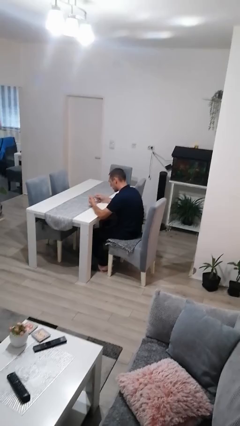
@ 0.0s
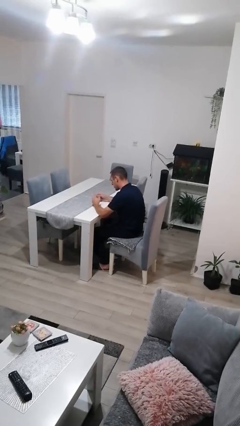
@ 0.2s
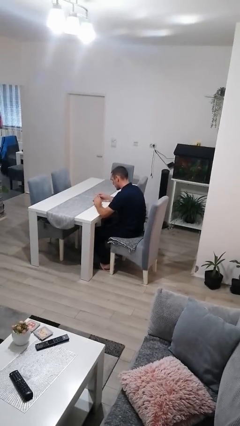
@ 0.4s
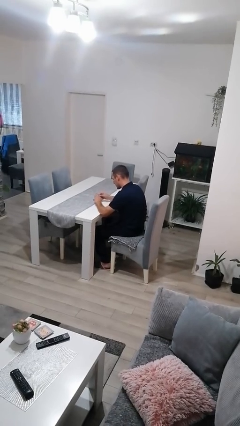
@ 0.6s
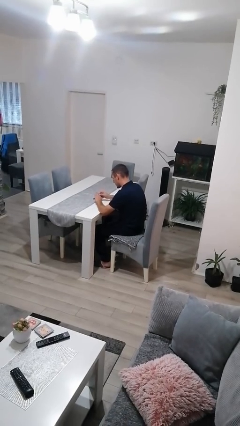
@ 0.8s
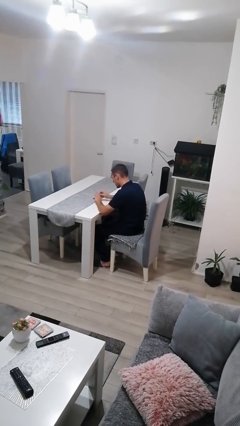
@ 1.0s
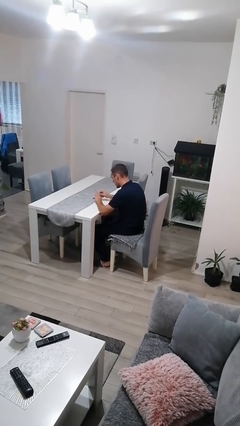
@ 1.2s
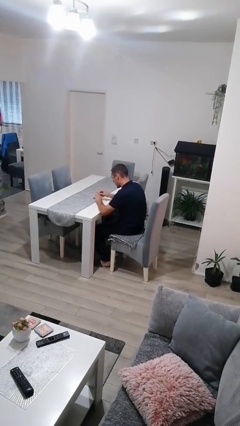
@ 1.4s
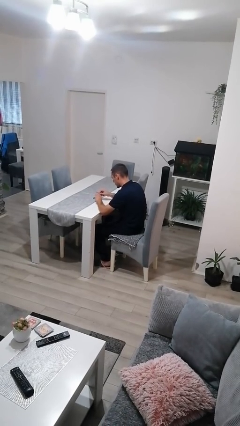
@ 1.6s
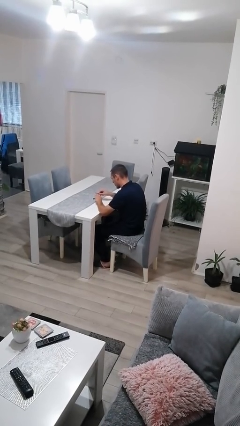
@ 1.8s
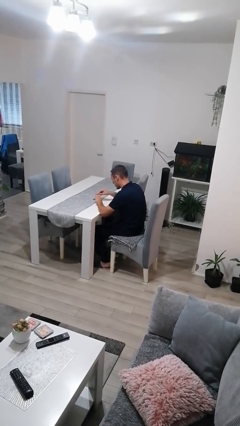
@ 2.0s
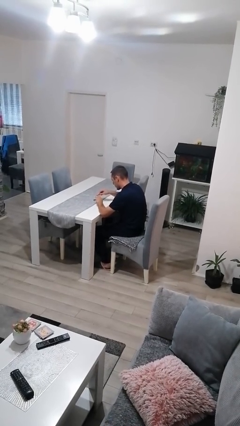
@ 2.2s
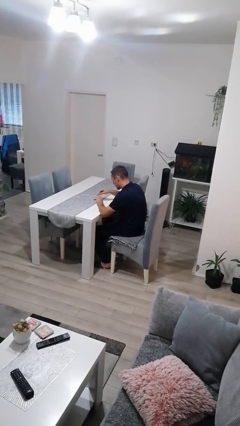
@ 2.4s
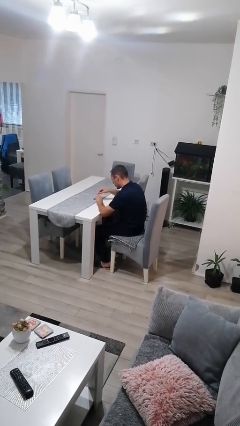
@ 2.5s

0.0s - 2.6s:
person files fingernails

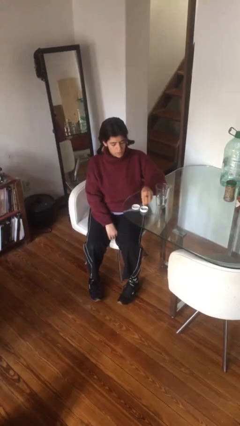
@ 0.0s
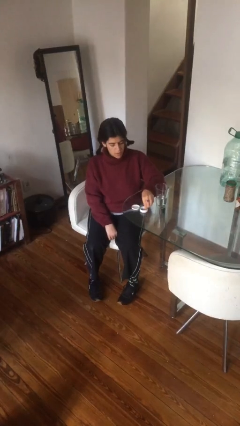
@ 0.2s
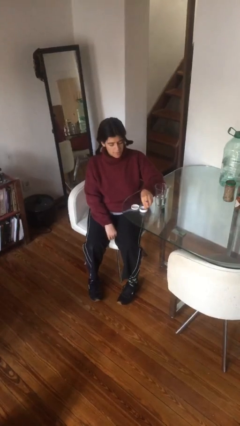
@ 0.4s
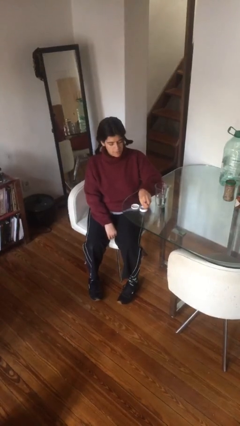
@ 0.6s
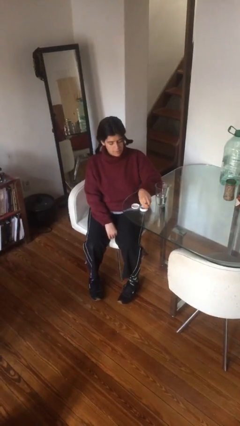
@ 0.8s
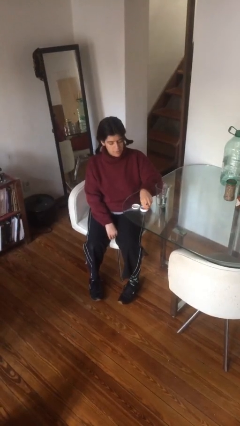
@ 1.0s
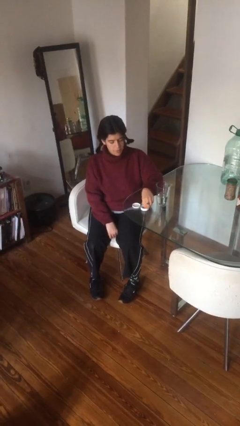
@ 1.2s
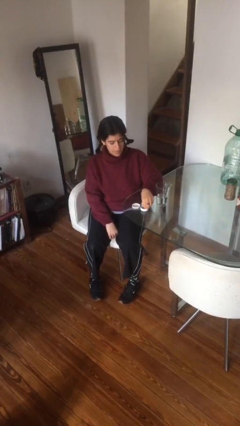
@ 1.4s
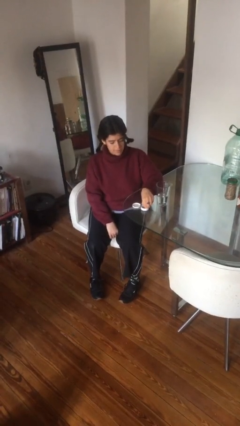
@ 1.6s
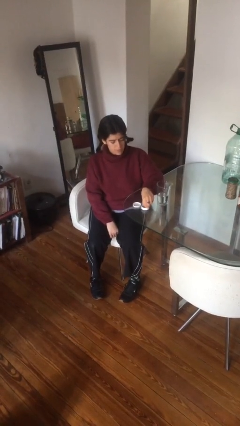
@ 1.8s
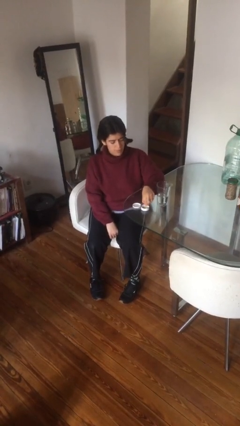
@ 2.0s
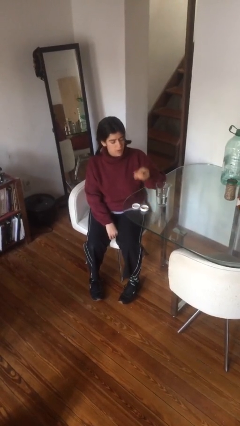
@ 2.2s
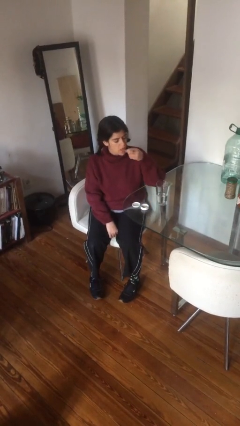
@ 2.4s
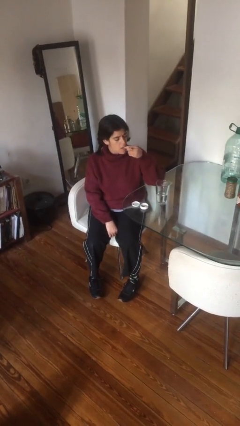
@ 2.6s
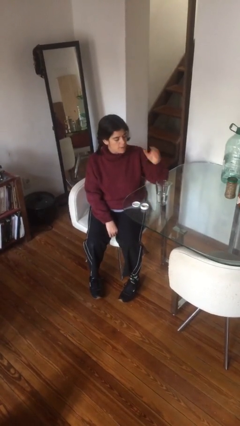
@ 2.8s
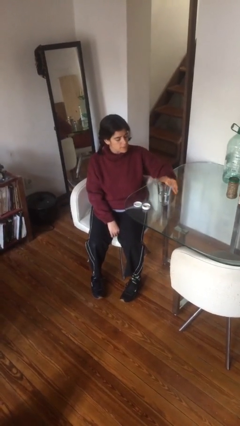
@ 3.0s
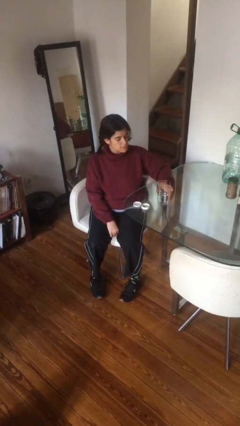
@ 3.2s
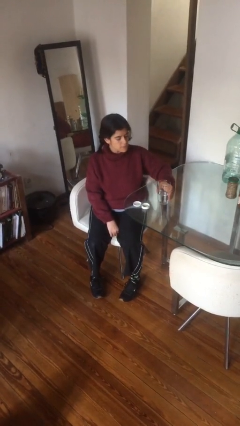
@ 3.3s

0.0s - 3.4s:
person takes medicine pills

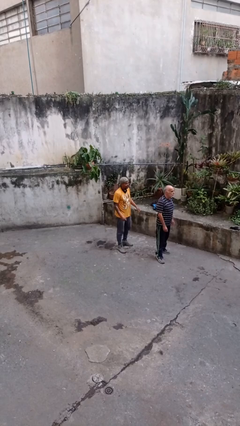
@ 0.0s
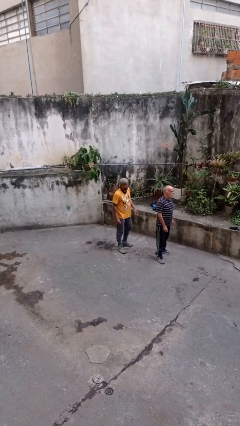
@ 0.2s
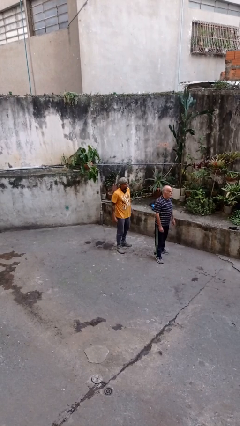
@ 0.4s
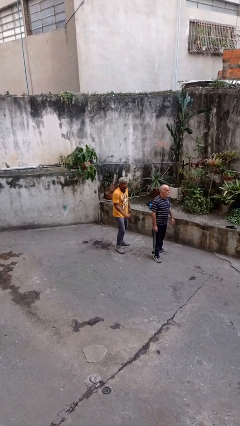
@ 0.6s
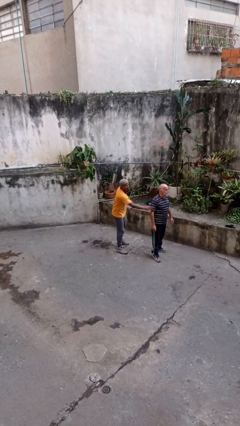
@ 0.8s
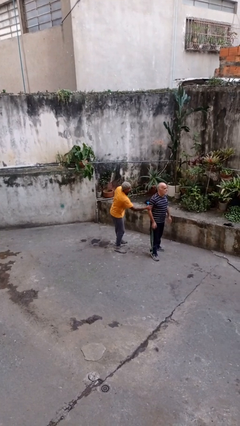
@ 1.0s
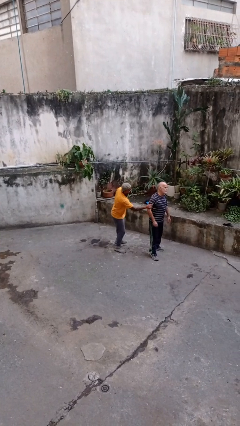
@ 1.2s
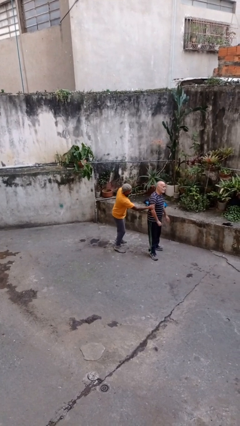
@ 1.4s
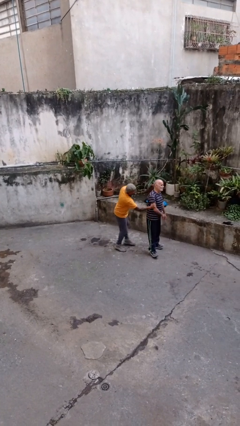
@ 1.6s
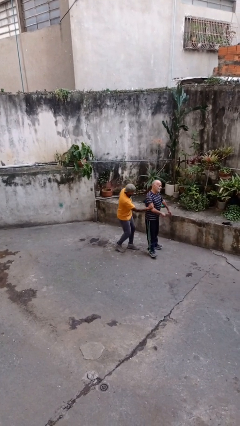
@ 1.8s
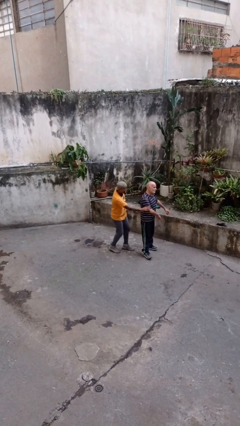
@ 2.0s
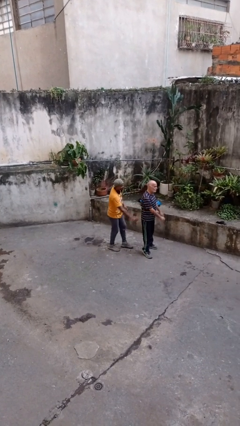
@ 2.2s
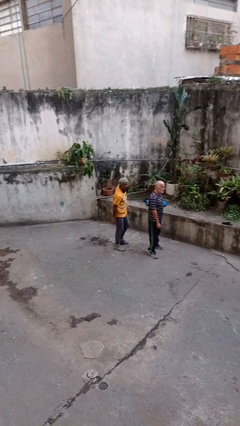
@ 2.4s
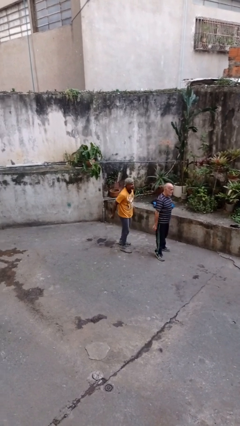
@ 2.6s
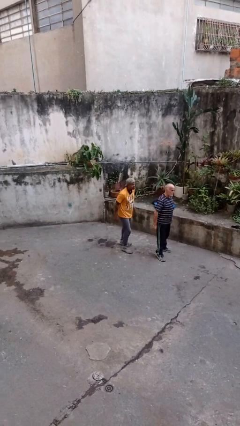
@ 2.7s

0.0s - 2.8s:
person grabs person by bicep

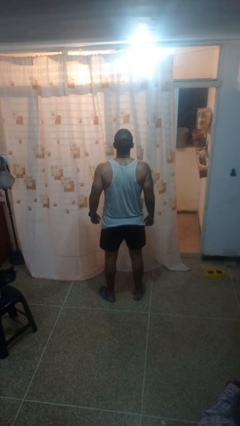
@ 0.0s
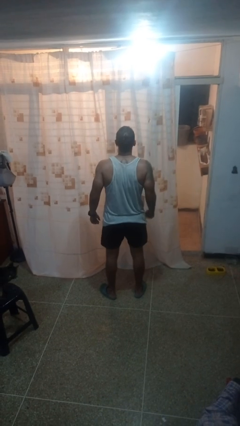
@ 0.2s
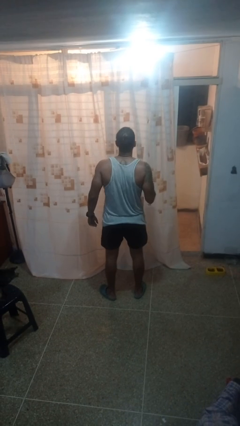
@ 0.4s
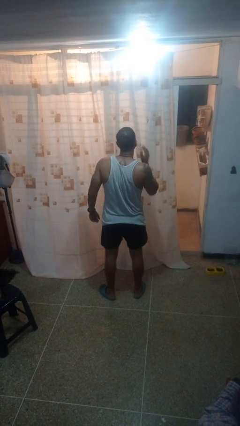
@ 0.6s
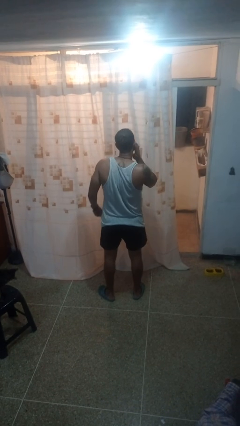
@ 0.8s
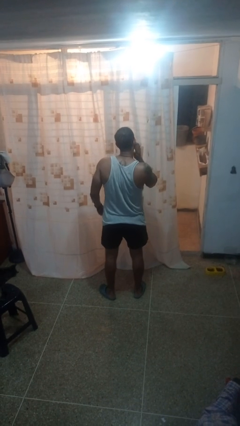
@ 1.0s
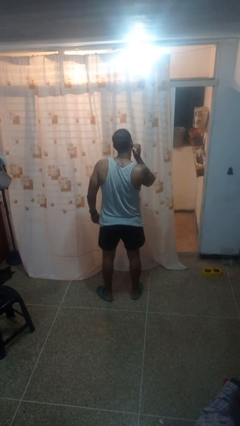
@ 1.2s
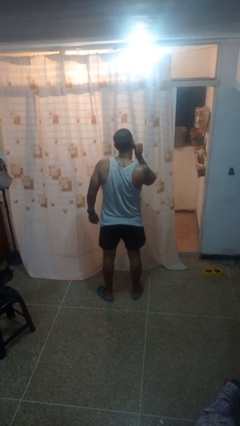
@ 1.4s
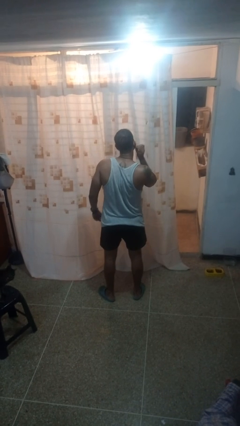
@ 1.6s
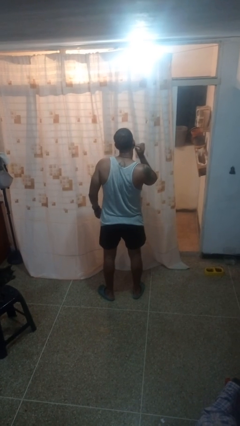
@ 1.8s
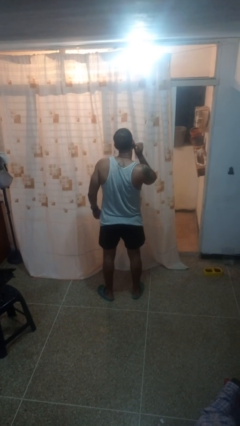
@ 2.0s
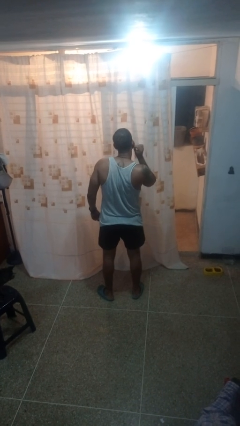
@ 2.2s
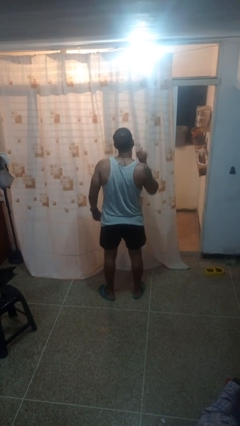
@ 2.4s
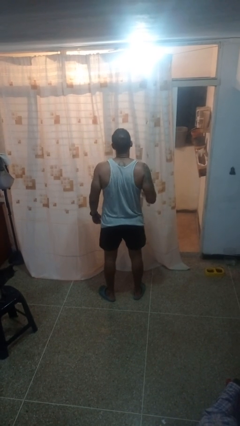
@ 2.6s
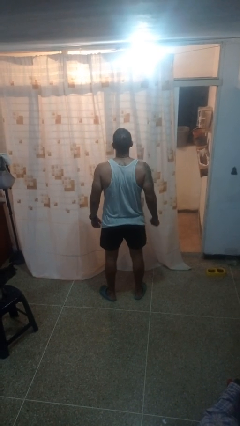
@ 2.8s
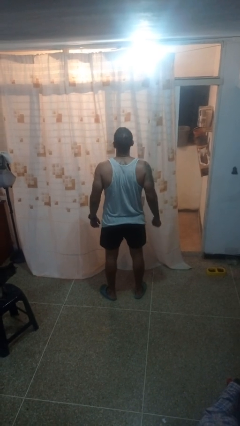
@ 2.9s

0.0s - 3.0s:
person touches earlobe

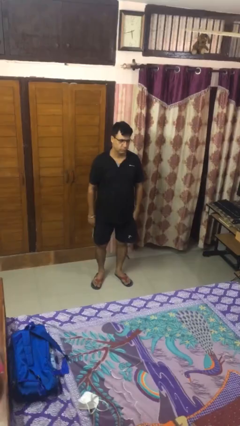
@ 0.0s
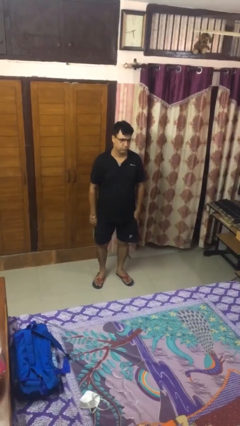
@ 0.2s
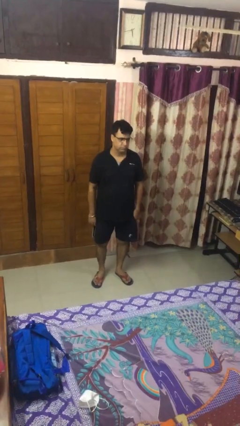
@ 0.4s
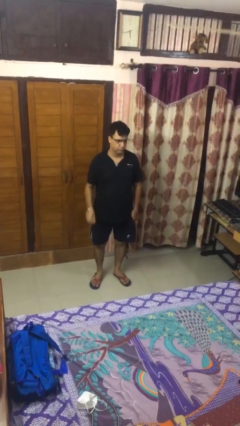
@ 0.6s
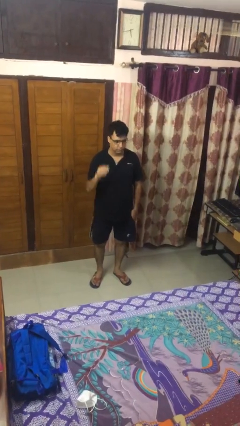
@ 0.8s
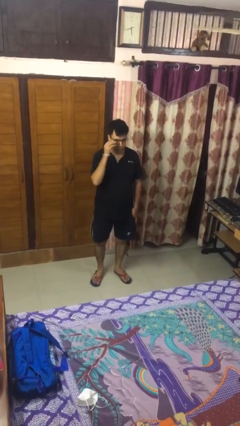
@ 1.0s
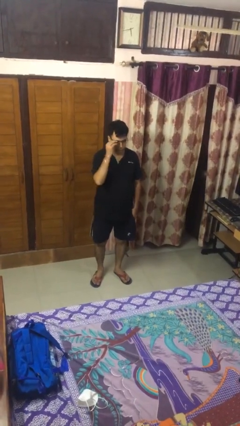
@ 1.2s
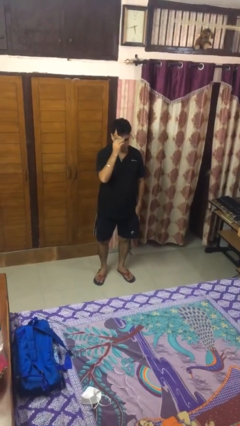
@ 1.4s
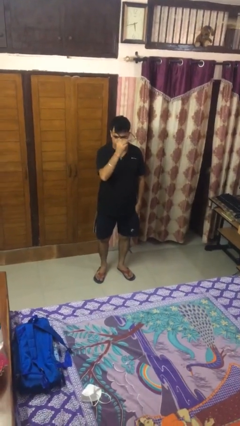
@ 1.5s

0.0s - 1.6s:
person takes off glasses

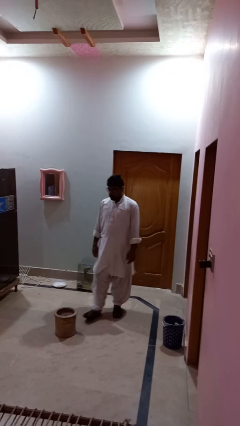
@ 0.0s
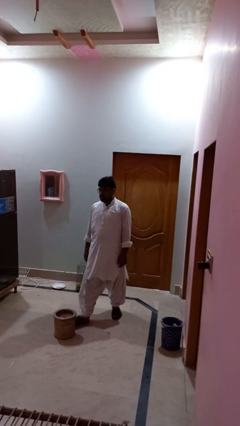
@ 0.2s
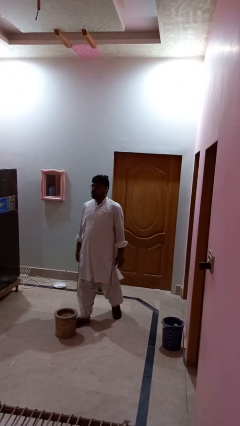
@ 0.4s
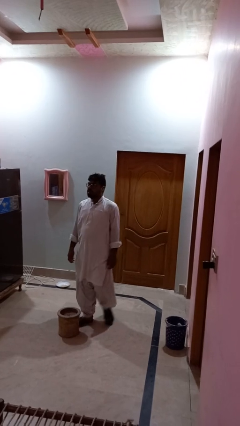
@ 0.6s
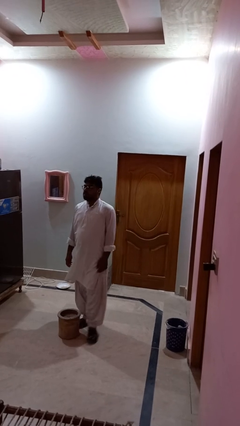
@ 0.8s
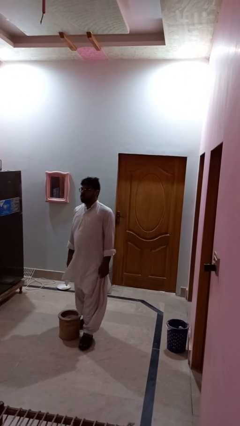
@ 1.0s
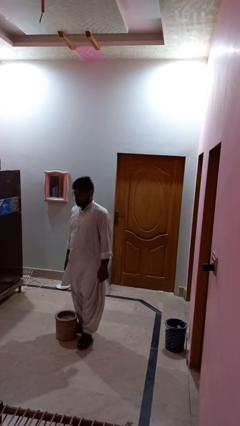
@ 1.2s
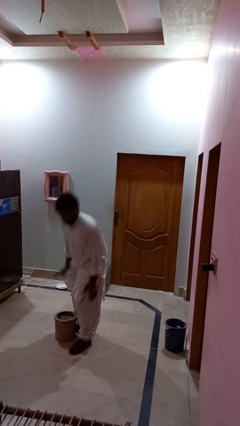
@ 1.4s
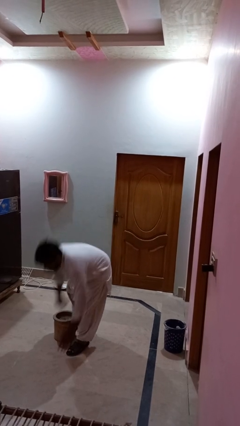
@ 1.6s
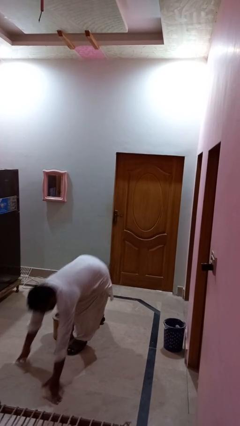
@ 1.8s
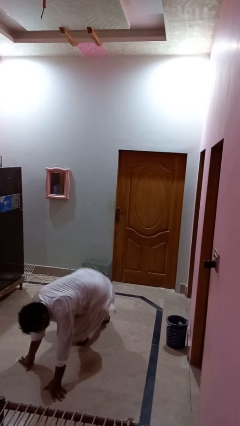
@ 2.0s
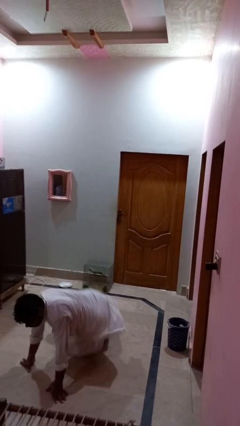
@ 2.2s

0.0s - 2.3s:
person trips on object on floor

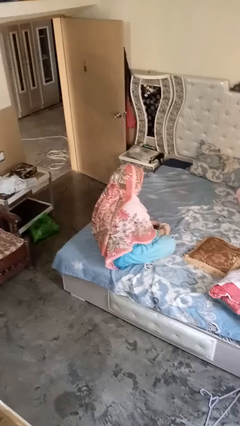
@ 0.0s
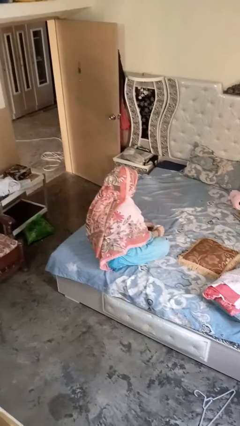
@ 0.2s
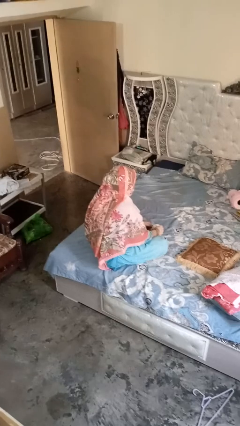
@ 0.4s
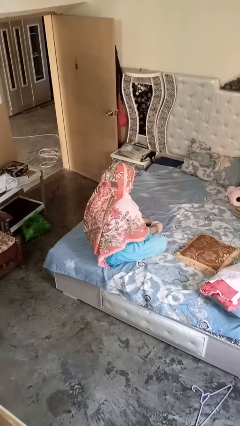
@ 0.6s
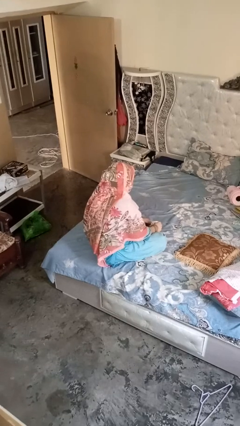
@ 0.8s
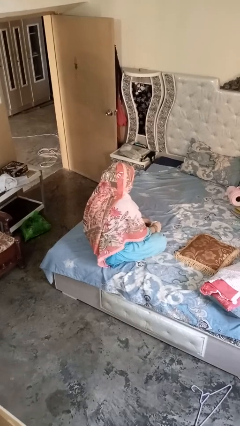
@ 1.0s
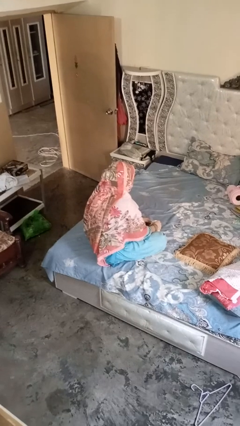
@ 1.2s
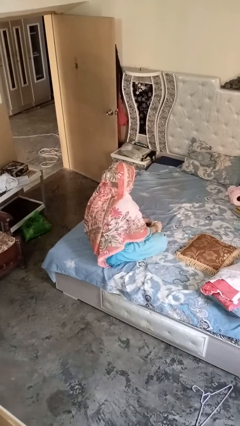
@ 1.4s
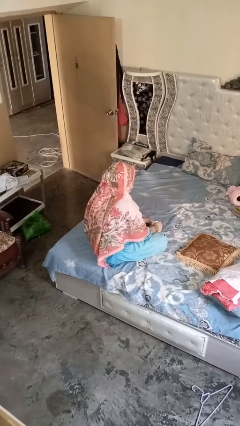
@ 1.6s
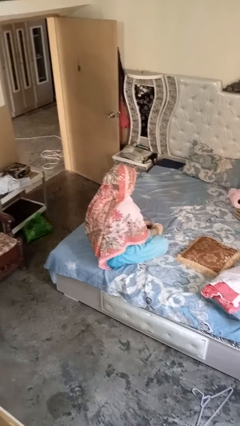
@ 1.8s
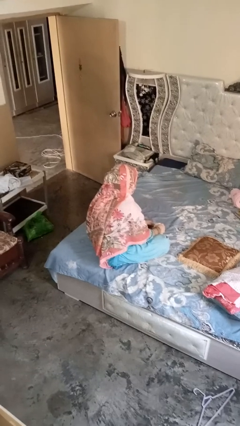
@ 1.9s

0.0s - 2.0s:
person stirs mug
